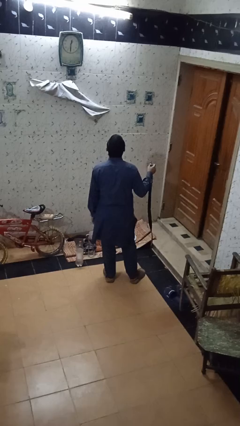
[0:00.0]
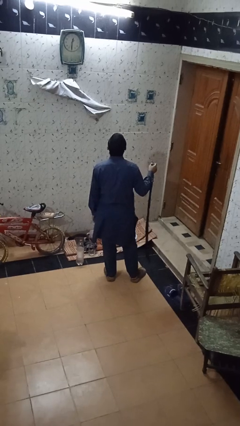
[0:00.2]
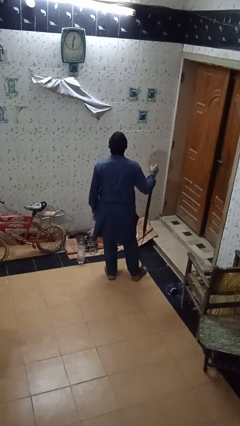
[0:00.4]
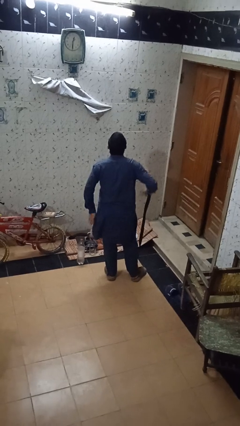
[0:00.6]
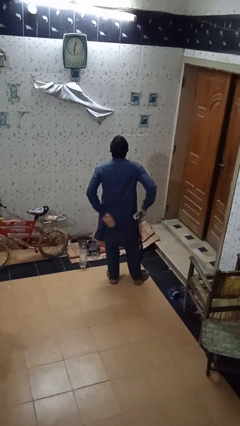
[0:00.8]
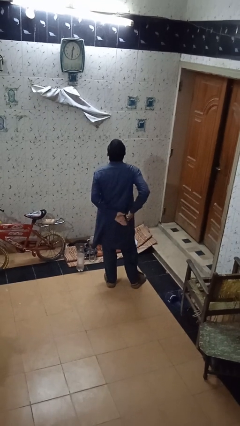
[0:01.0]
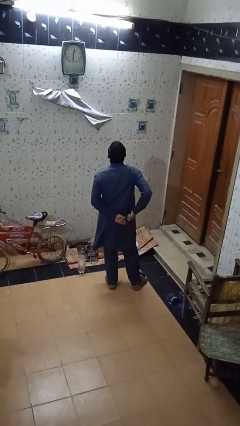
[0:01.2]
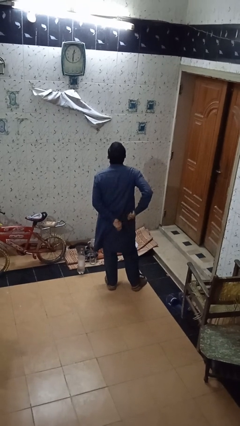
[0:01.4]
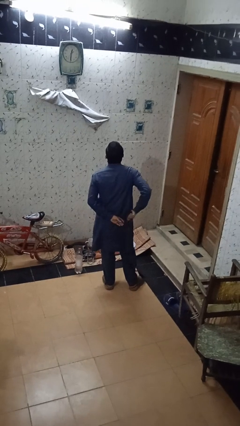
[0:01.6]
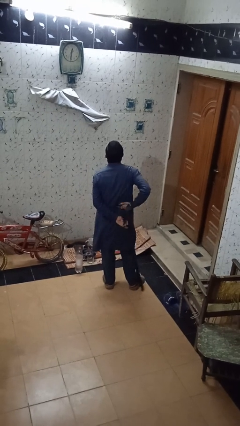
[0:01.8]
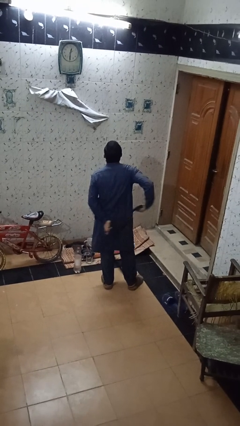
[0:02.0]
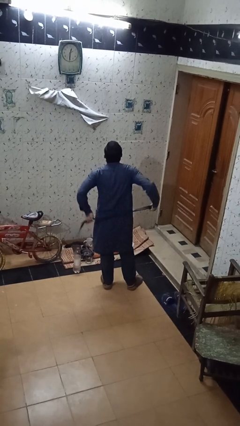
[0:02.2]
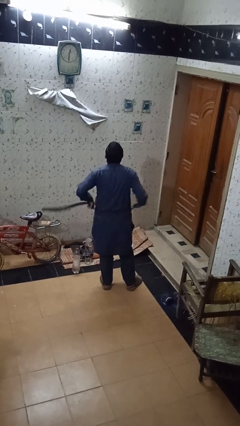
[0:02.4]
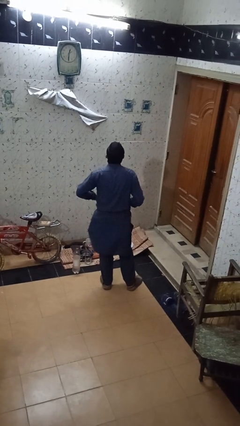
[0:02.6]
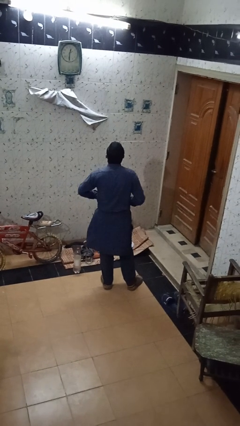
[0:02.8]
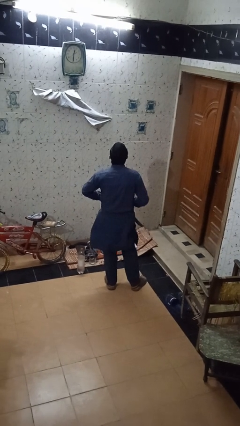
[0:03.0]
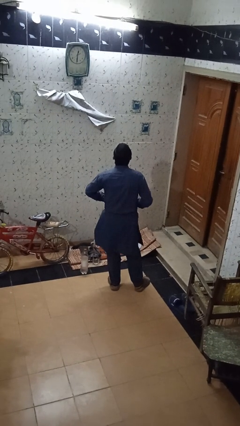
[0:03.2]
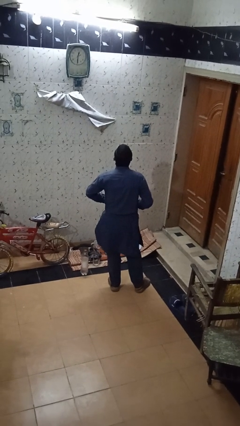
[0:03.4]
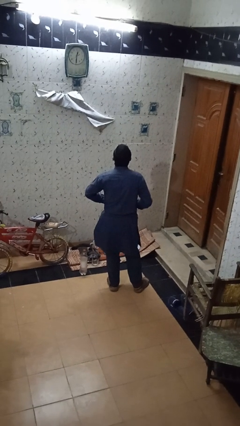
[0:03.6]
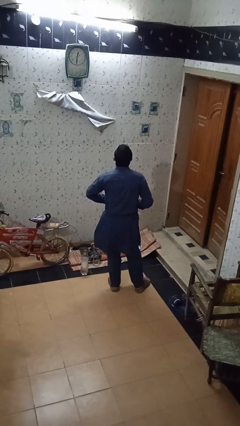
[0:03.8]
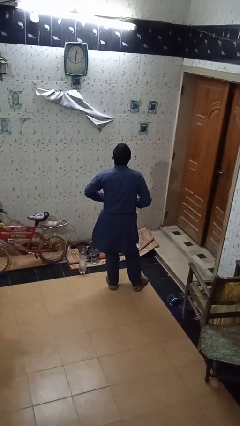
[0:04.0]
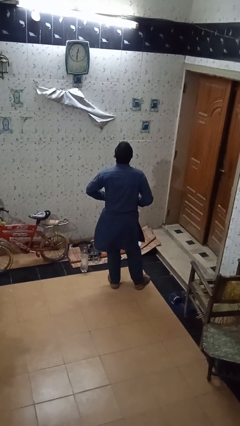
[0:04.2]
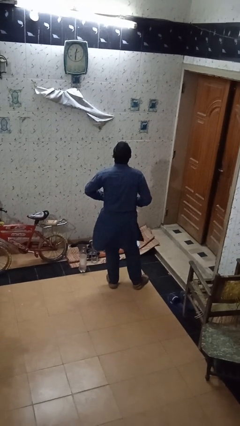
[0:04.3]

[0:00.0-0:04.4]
person puts on belt

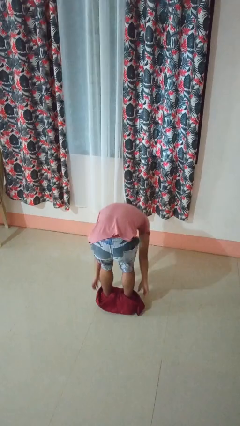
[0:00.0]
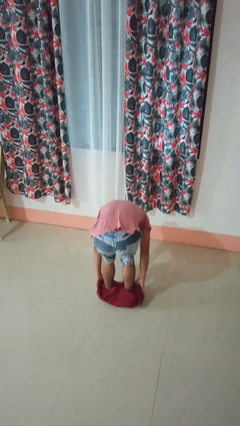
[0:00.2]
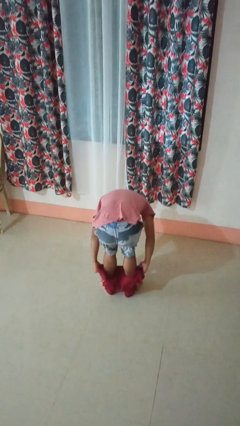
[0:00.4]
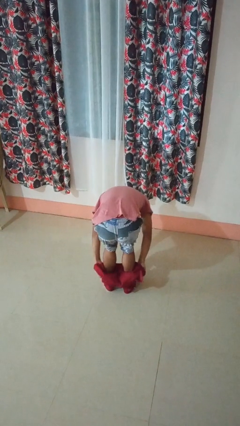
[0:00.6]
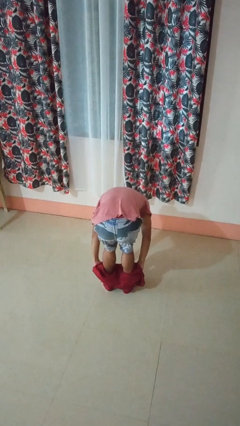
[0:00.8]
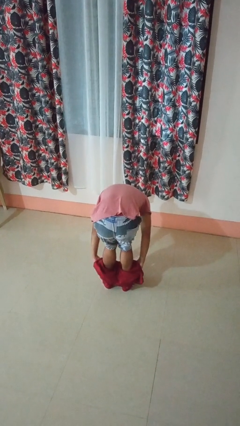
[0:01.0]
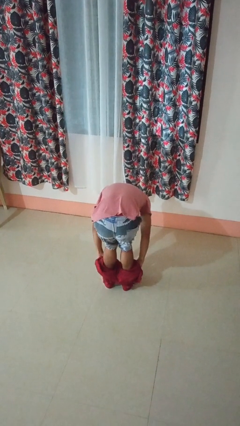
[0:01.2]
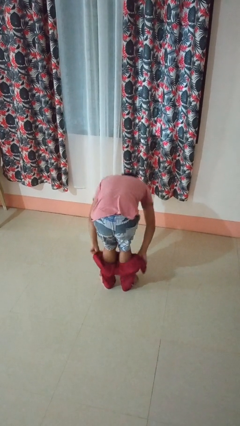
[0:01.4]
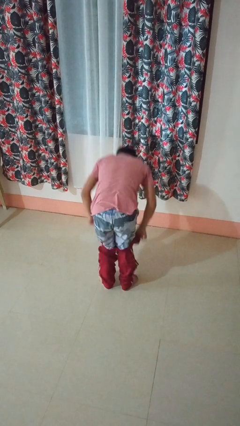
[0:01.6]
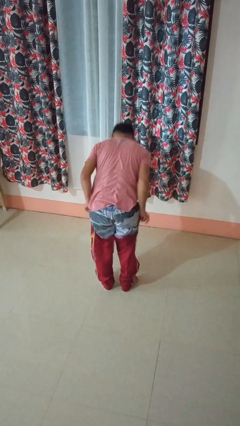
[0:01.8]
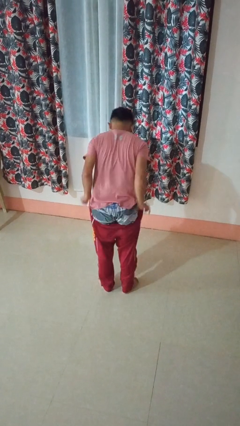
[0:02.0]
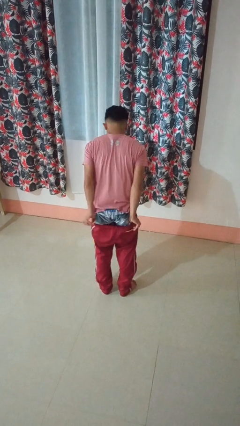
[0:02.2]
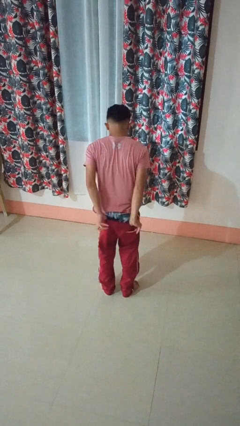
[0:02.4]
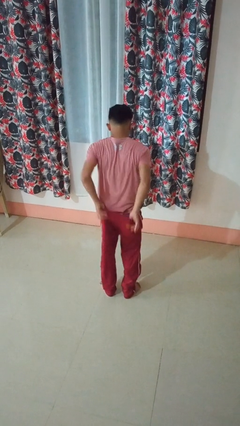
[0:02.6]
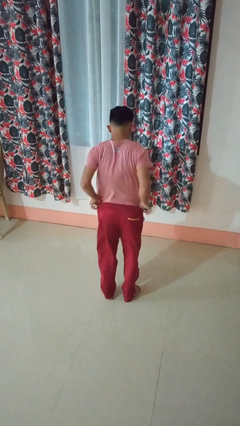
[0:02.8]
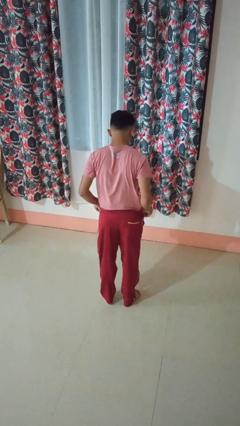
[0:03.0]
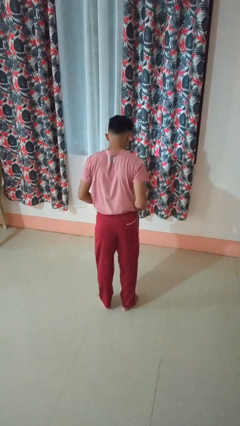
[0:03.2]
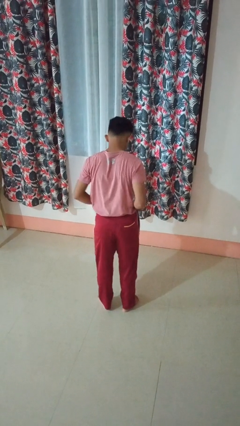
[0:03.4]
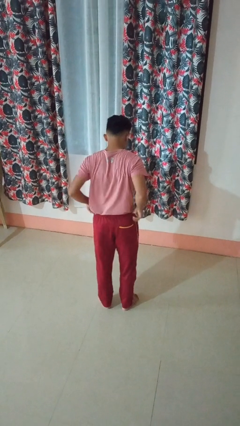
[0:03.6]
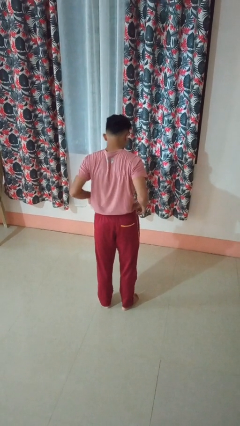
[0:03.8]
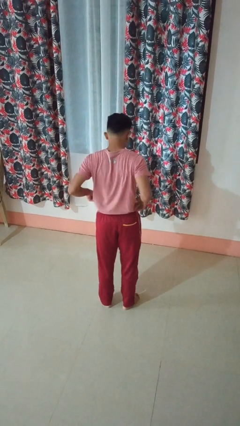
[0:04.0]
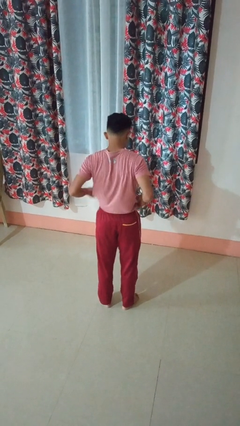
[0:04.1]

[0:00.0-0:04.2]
person puts on pants

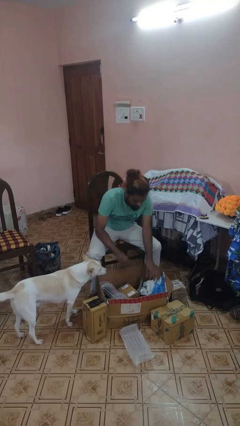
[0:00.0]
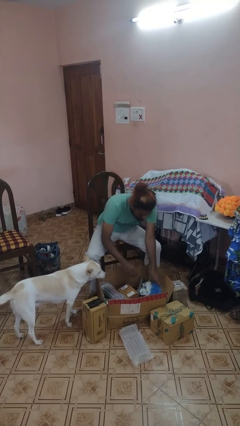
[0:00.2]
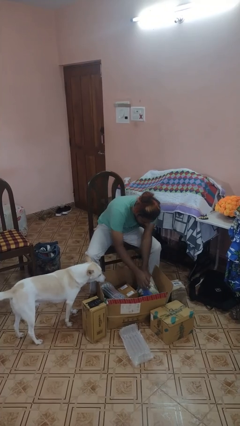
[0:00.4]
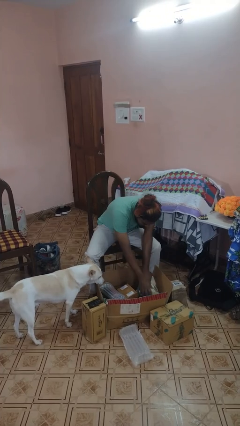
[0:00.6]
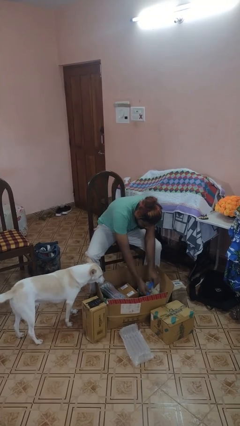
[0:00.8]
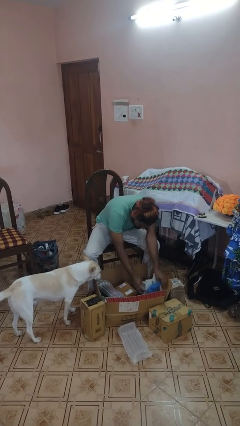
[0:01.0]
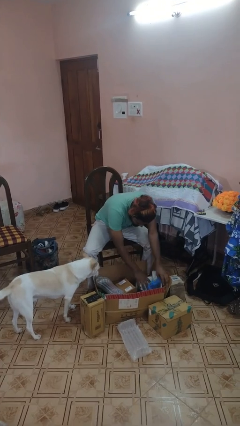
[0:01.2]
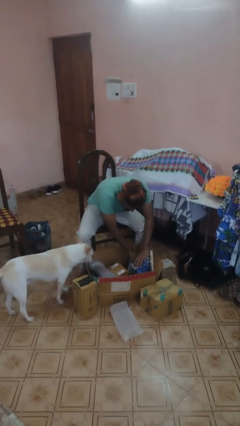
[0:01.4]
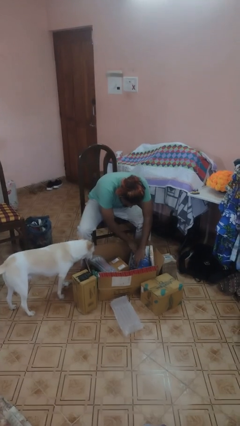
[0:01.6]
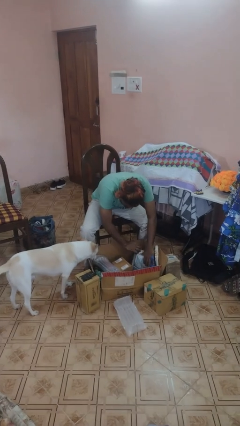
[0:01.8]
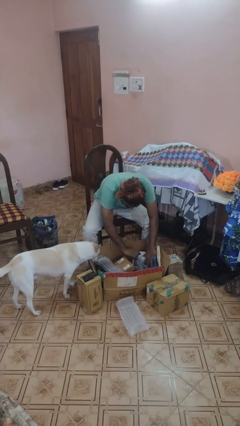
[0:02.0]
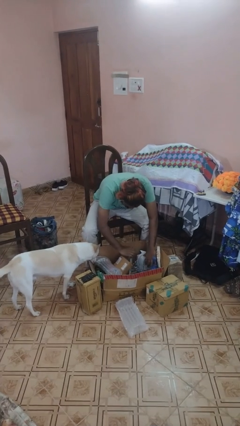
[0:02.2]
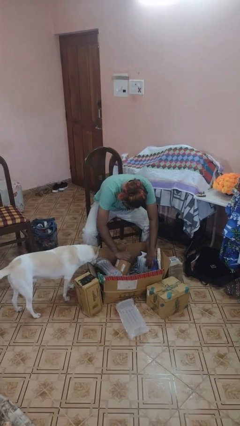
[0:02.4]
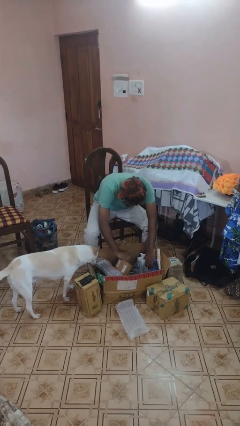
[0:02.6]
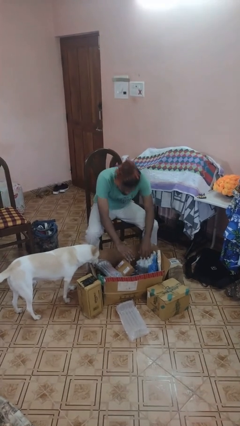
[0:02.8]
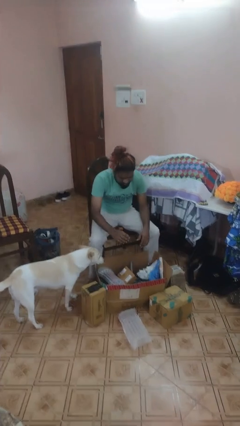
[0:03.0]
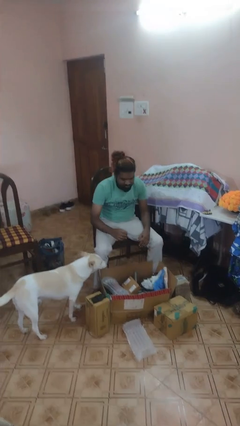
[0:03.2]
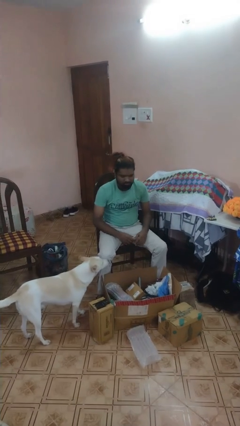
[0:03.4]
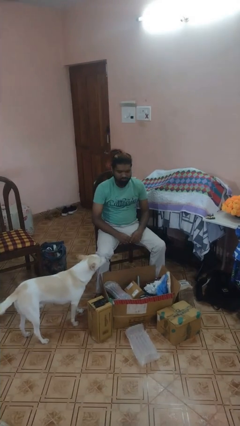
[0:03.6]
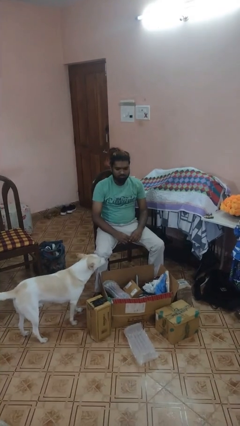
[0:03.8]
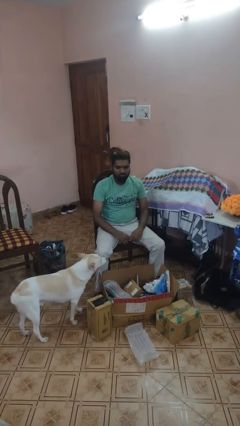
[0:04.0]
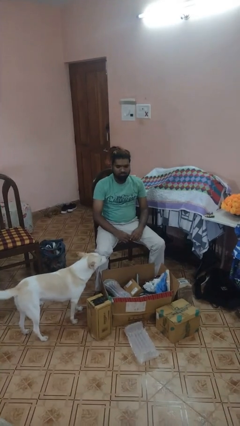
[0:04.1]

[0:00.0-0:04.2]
person searches in box

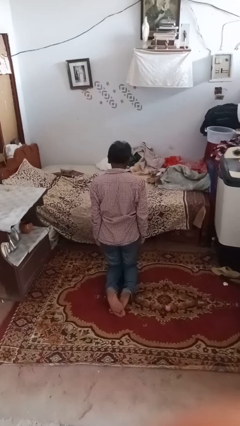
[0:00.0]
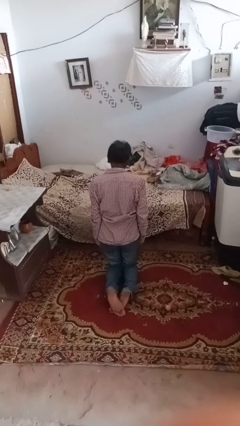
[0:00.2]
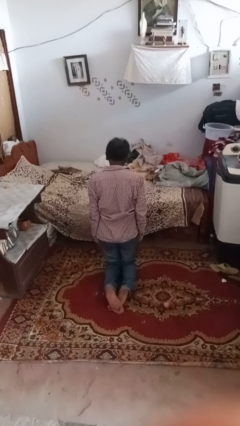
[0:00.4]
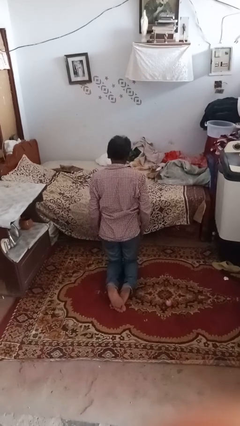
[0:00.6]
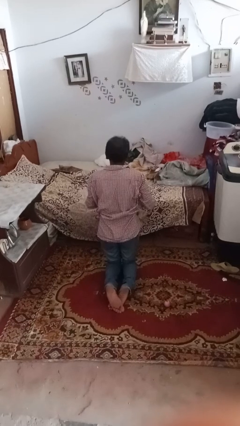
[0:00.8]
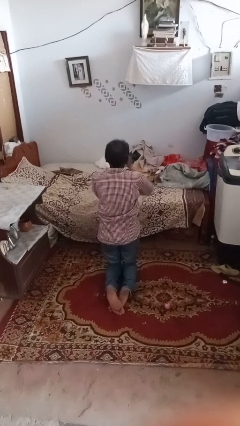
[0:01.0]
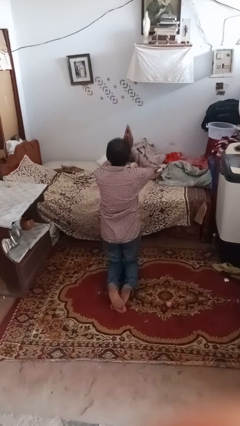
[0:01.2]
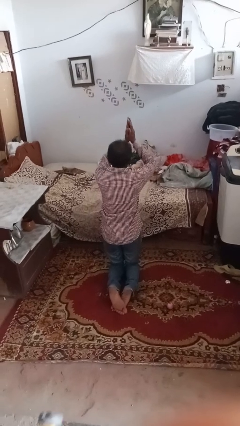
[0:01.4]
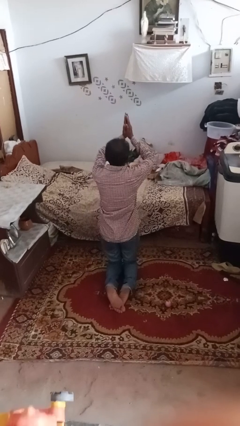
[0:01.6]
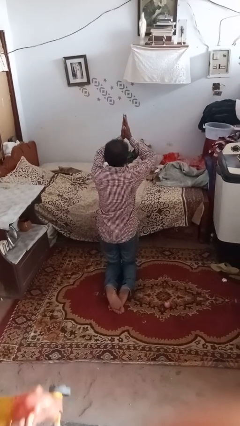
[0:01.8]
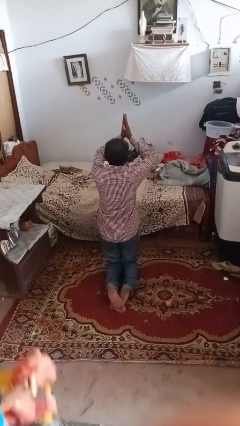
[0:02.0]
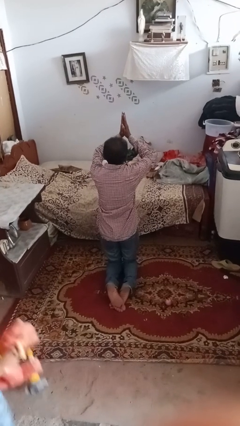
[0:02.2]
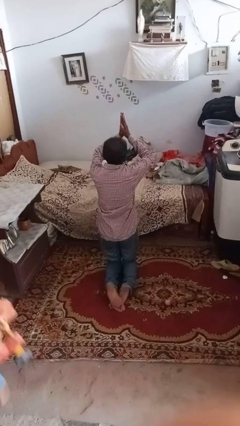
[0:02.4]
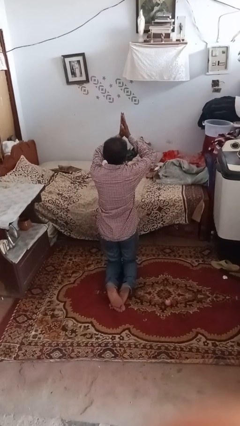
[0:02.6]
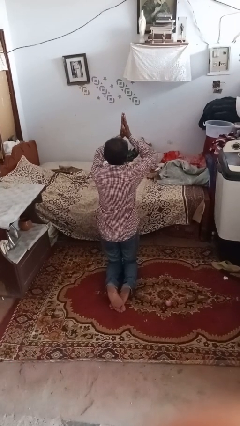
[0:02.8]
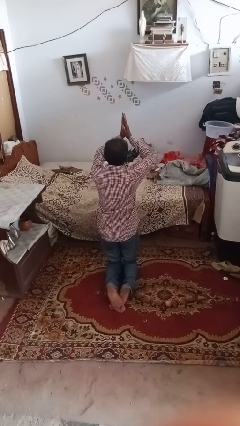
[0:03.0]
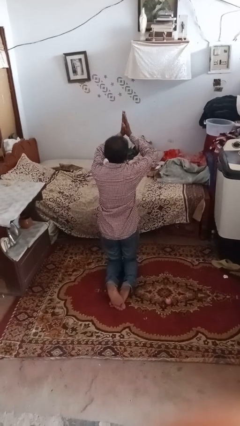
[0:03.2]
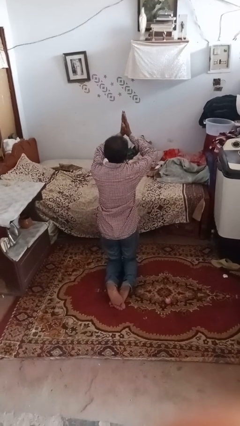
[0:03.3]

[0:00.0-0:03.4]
person prays

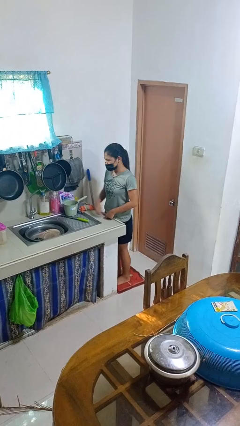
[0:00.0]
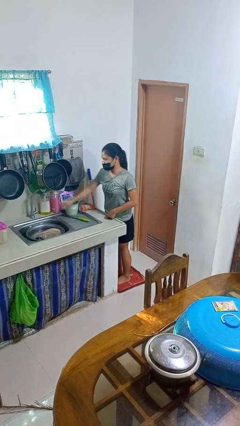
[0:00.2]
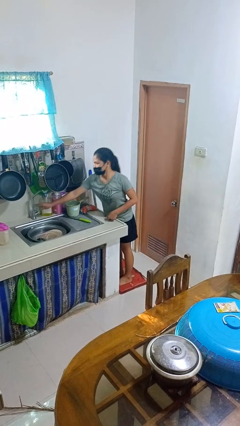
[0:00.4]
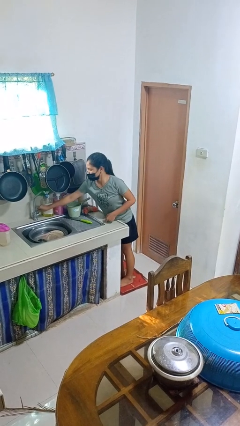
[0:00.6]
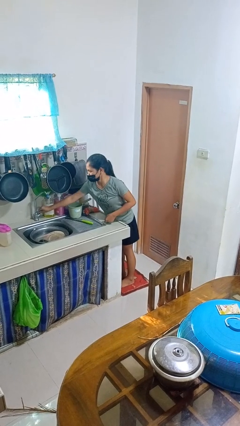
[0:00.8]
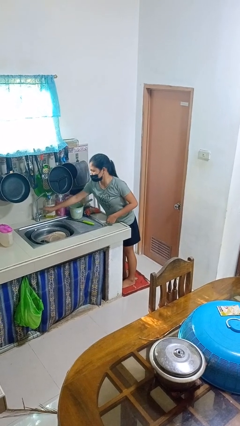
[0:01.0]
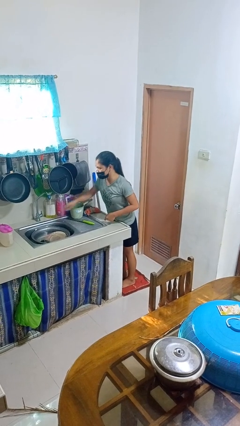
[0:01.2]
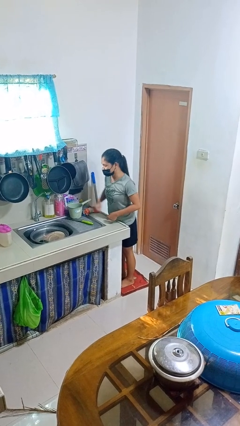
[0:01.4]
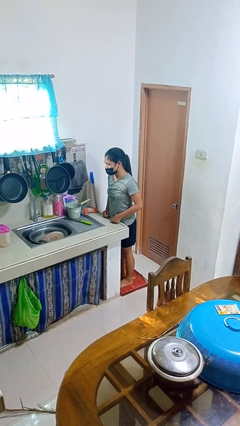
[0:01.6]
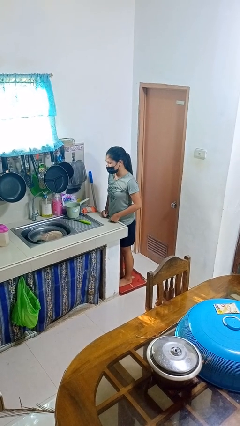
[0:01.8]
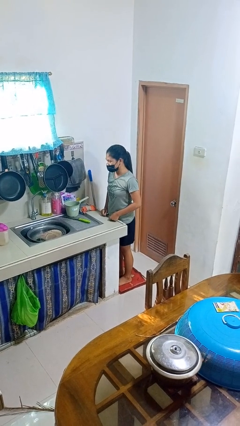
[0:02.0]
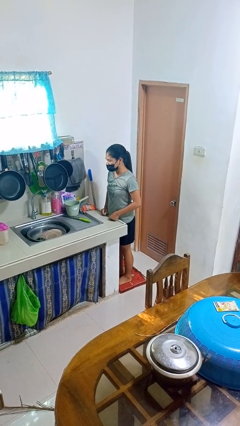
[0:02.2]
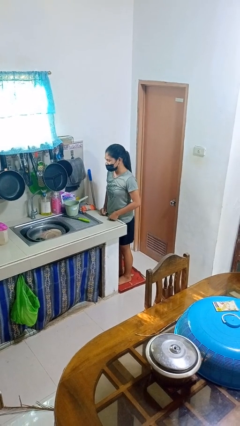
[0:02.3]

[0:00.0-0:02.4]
person turns on faucet
